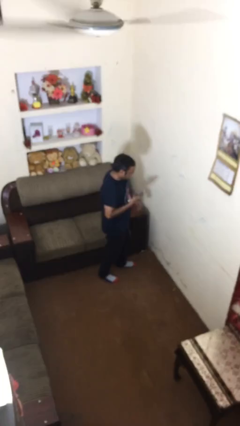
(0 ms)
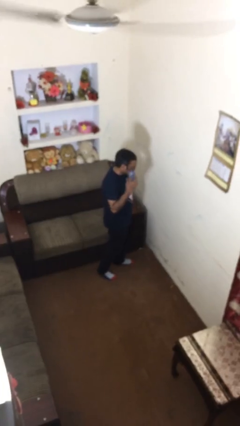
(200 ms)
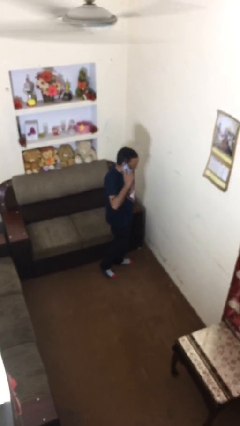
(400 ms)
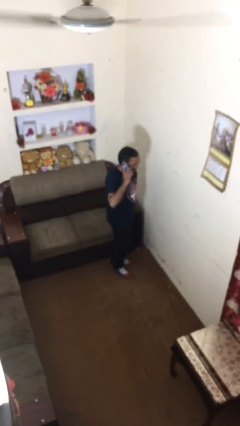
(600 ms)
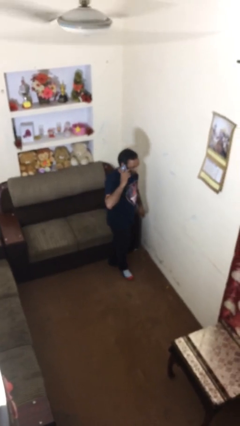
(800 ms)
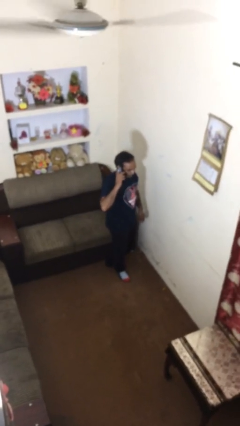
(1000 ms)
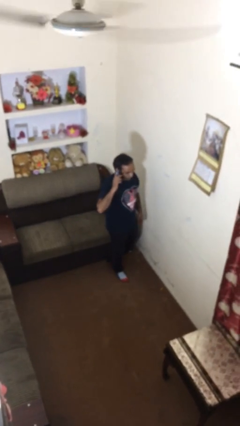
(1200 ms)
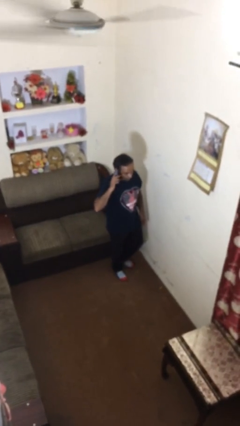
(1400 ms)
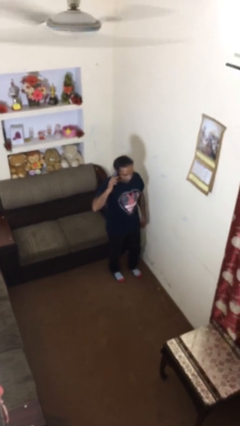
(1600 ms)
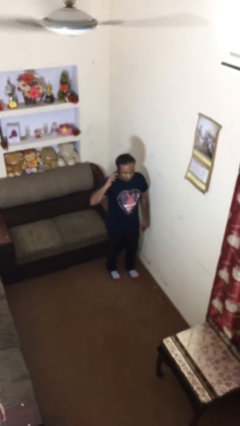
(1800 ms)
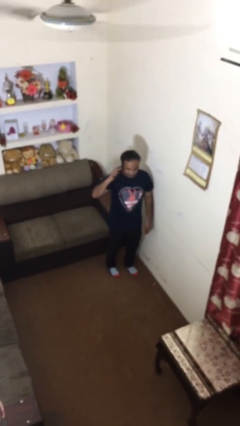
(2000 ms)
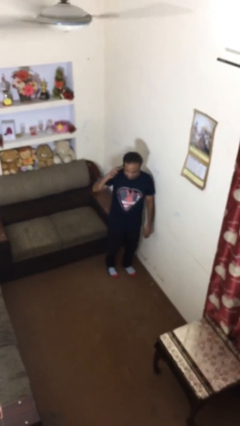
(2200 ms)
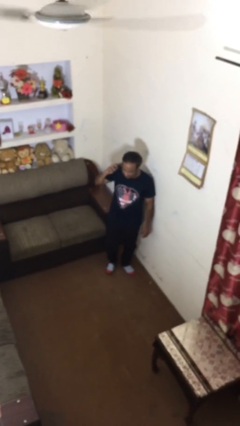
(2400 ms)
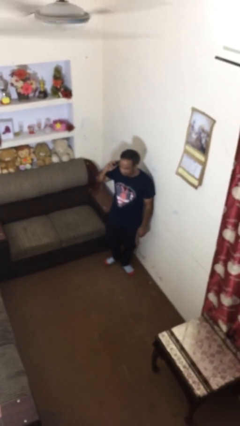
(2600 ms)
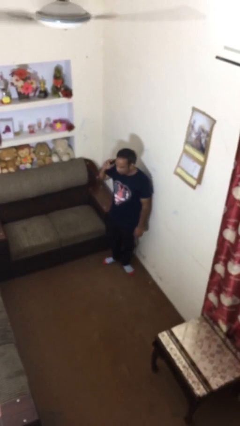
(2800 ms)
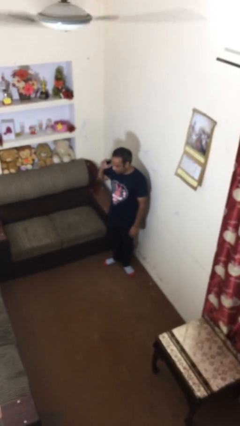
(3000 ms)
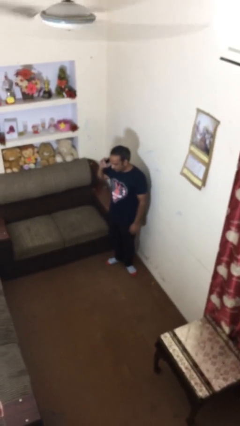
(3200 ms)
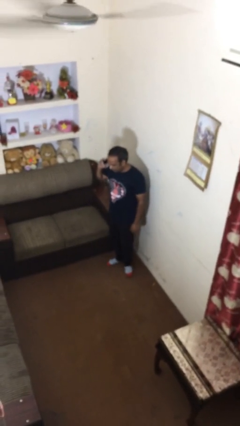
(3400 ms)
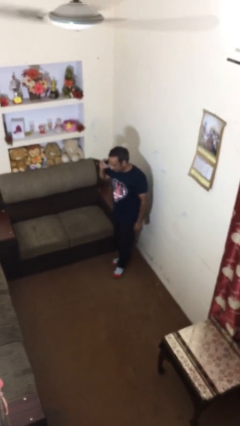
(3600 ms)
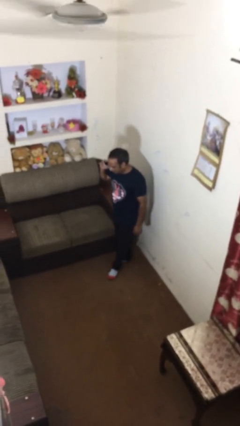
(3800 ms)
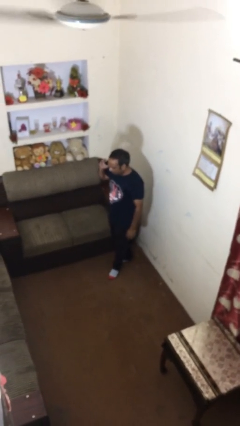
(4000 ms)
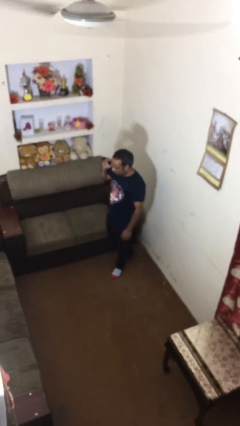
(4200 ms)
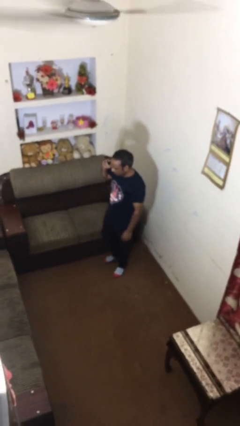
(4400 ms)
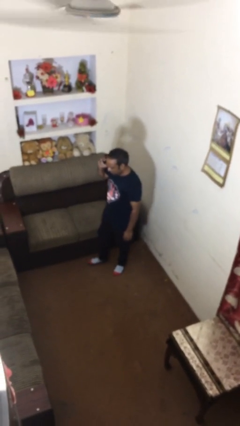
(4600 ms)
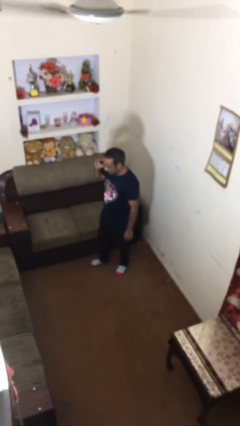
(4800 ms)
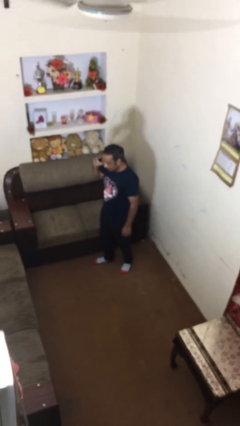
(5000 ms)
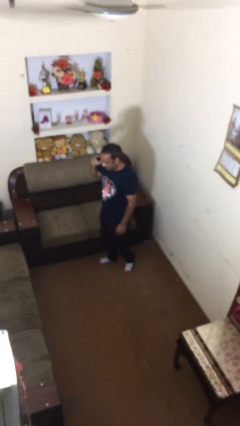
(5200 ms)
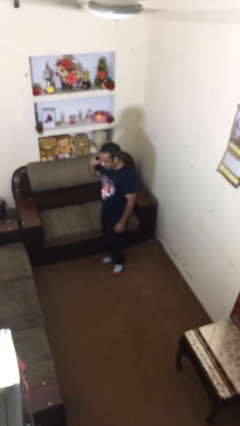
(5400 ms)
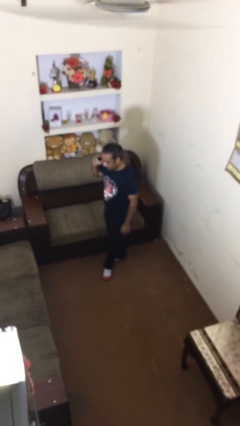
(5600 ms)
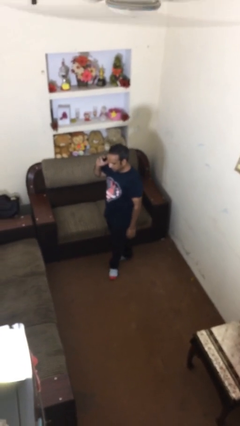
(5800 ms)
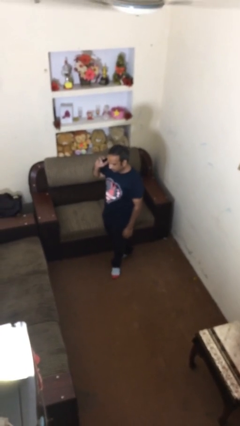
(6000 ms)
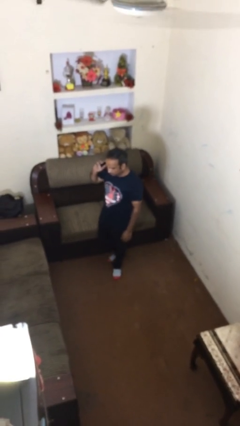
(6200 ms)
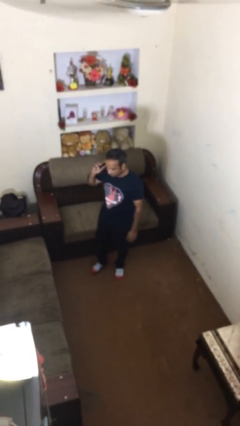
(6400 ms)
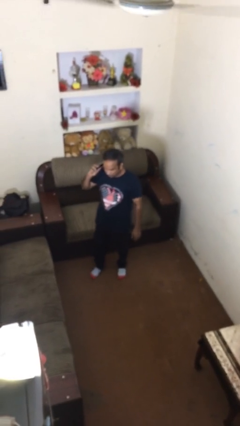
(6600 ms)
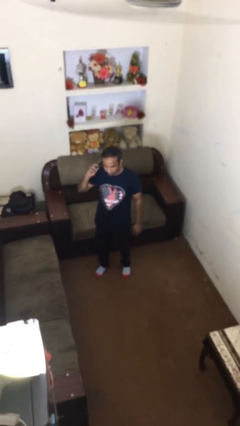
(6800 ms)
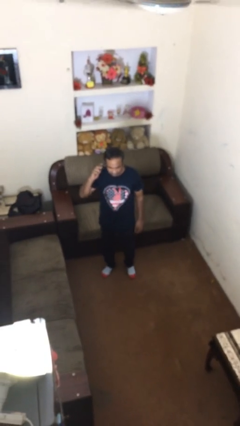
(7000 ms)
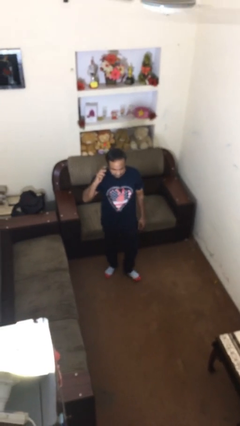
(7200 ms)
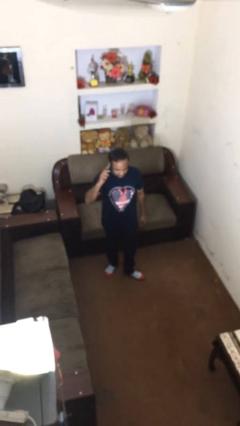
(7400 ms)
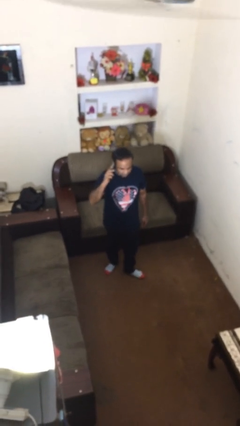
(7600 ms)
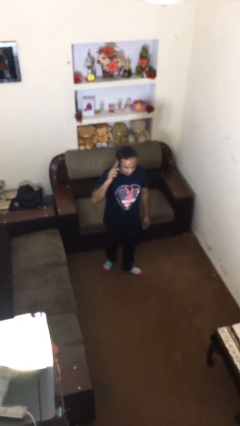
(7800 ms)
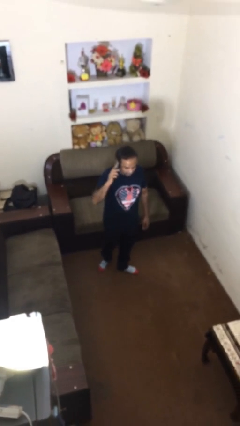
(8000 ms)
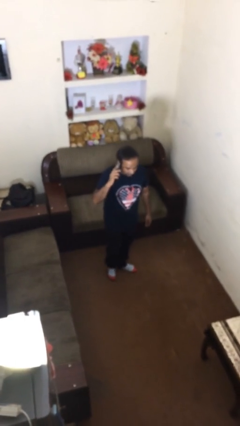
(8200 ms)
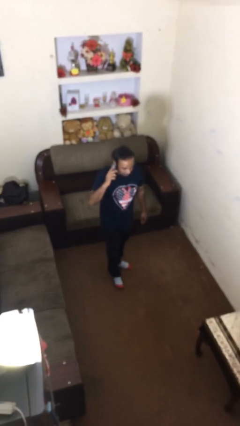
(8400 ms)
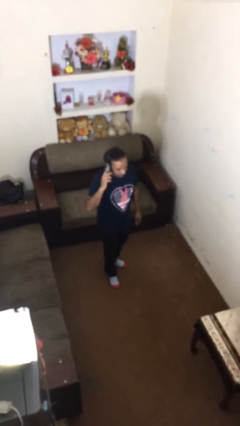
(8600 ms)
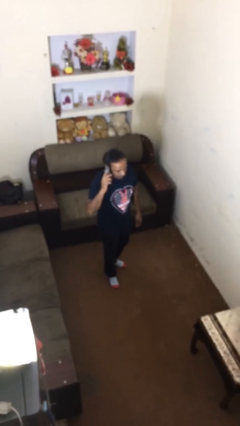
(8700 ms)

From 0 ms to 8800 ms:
person talks on phone

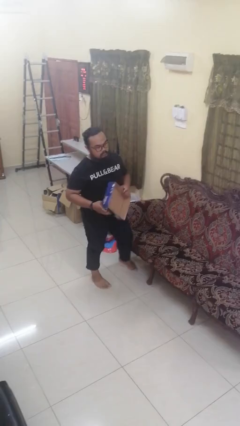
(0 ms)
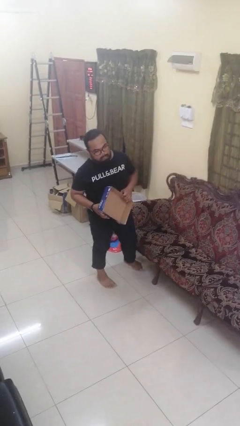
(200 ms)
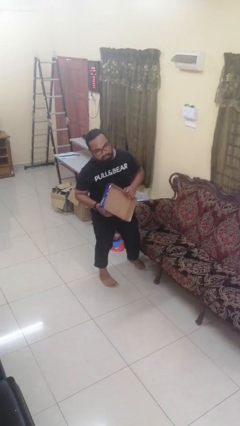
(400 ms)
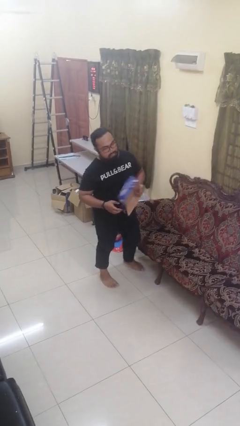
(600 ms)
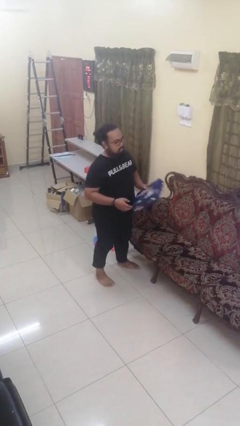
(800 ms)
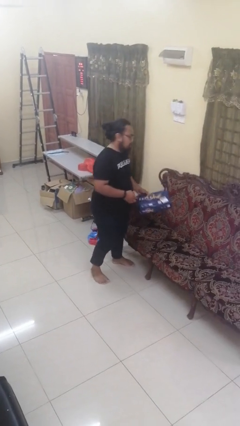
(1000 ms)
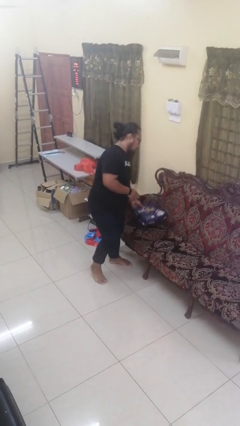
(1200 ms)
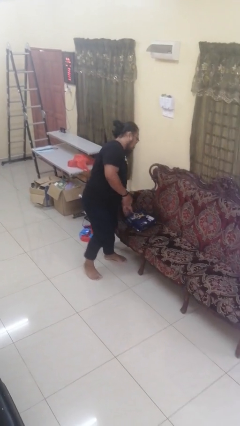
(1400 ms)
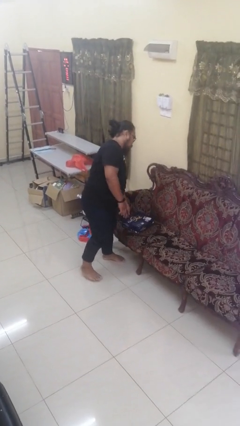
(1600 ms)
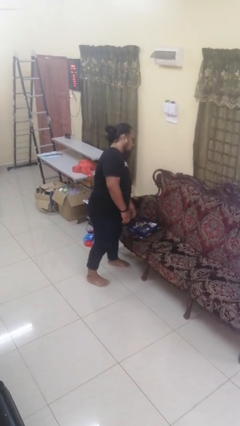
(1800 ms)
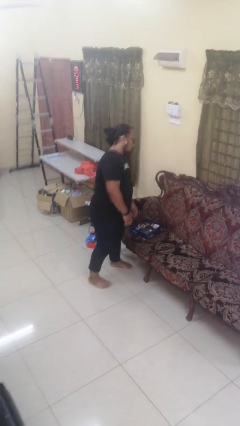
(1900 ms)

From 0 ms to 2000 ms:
person puts down object on couch

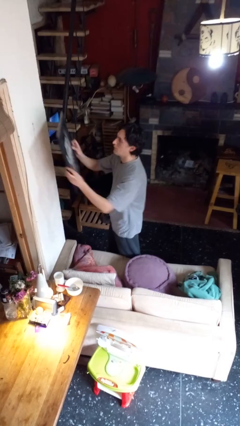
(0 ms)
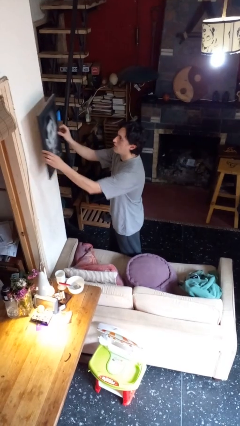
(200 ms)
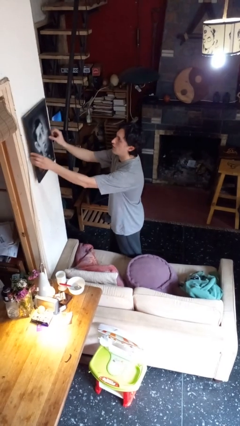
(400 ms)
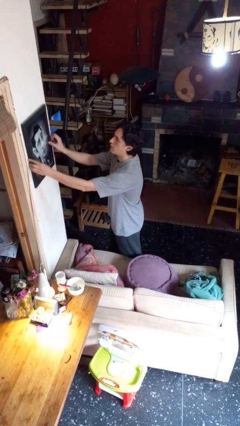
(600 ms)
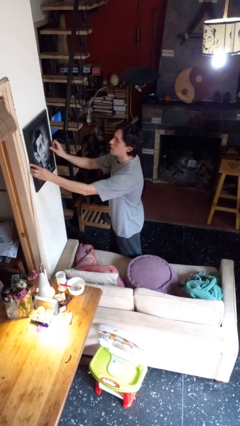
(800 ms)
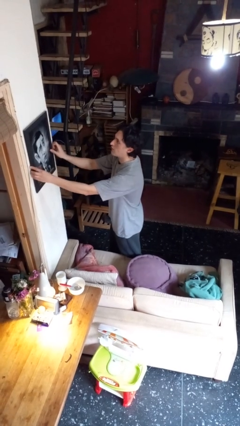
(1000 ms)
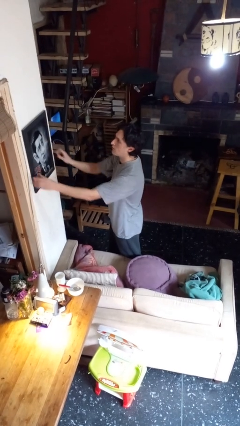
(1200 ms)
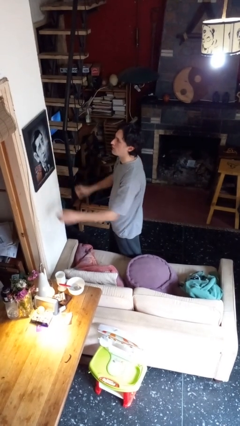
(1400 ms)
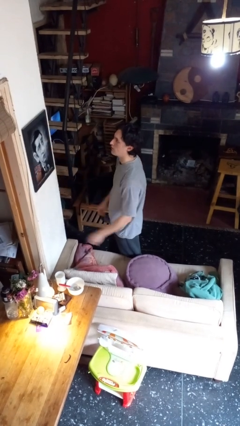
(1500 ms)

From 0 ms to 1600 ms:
person puts up picture frame

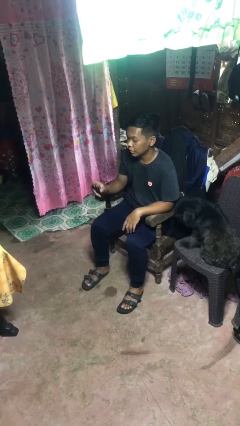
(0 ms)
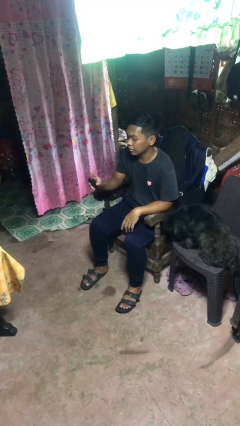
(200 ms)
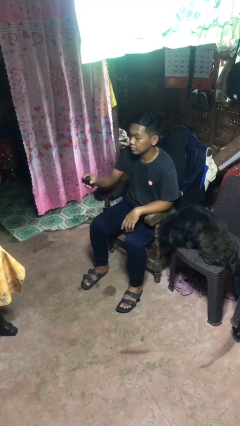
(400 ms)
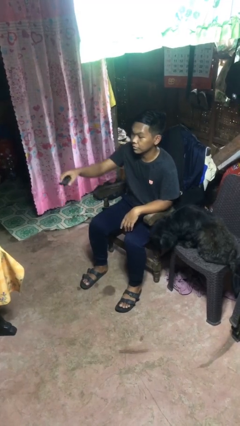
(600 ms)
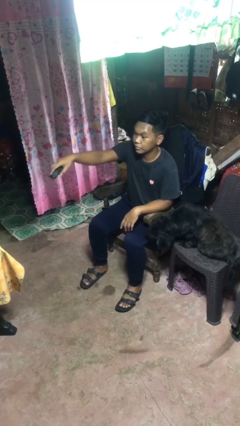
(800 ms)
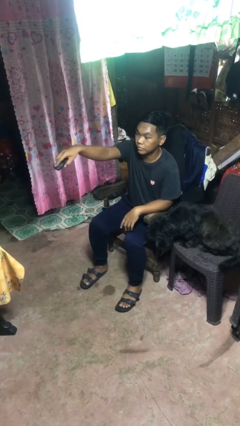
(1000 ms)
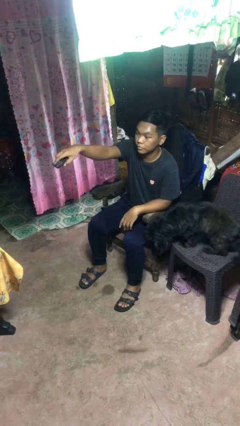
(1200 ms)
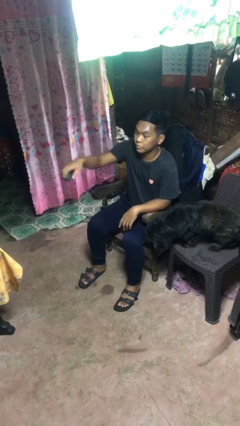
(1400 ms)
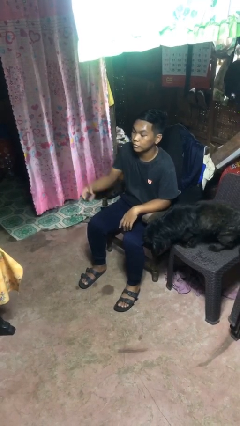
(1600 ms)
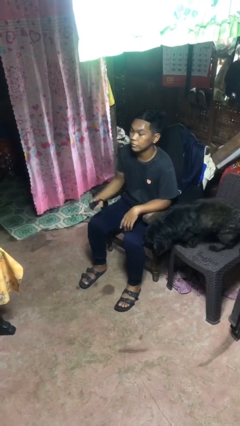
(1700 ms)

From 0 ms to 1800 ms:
person uses television remote

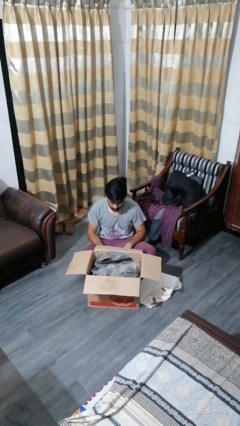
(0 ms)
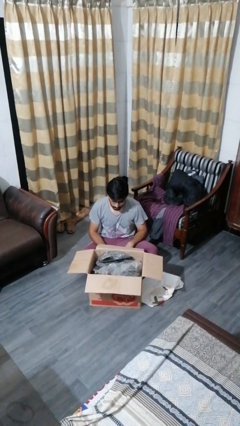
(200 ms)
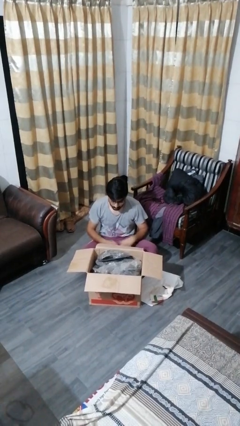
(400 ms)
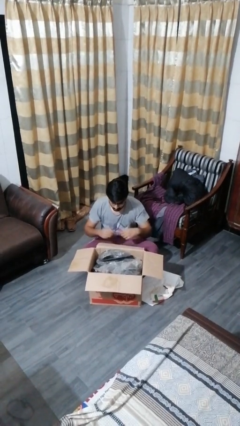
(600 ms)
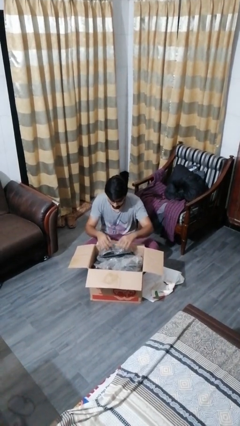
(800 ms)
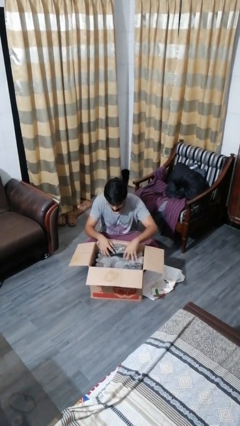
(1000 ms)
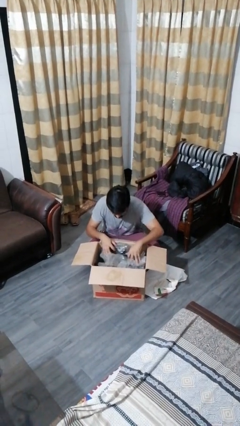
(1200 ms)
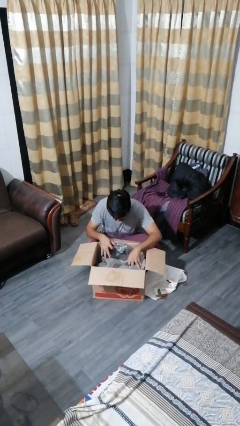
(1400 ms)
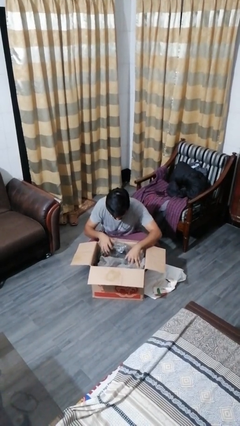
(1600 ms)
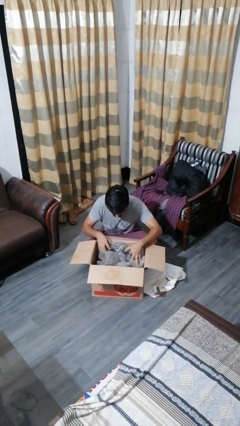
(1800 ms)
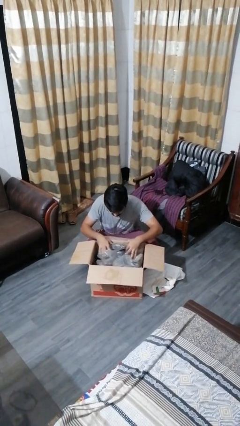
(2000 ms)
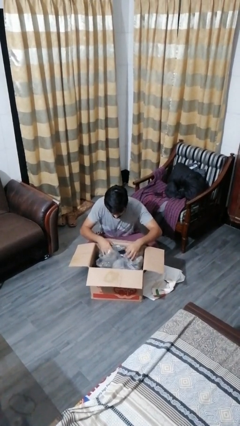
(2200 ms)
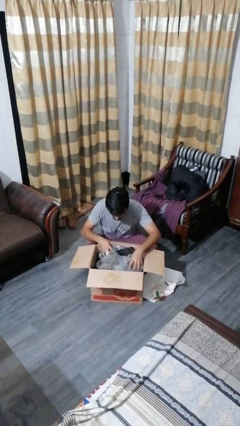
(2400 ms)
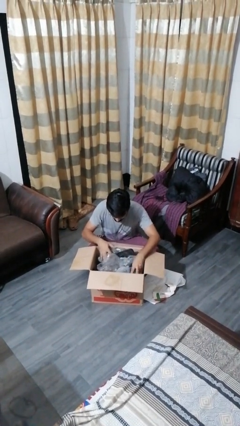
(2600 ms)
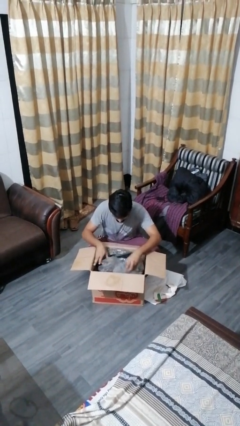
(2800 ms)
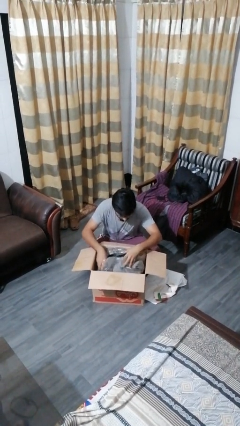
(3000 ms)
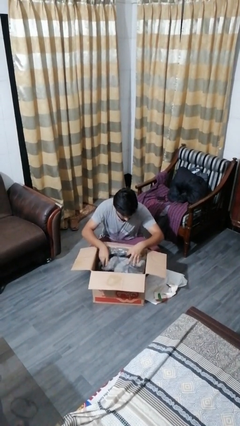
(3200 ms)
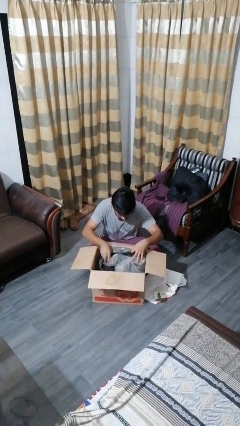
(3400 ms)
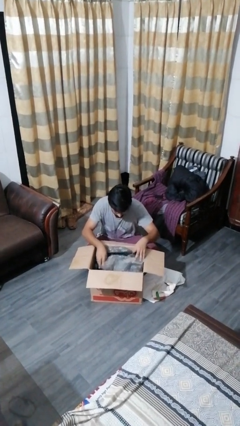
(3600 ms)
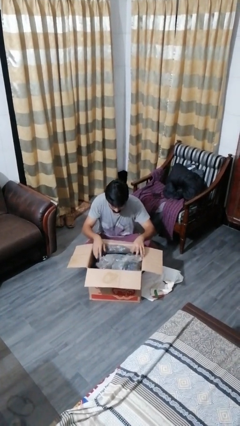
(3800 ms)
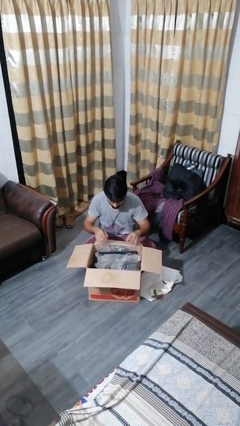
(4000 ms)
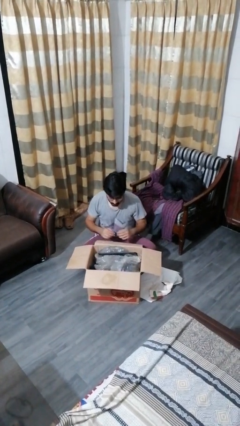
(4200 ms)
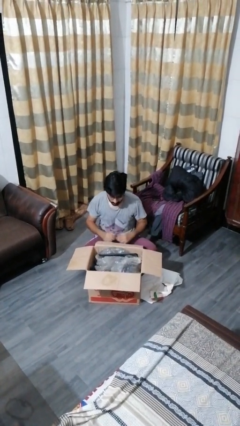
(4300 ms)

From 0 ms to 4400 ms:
person searches in box
